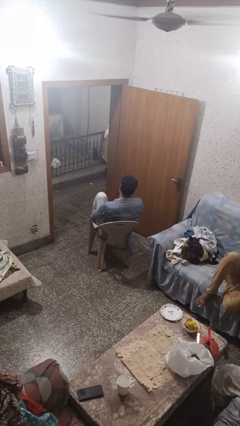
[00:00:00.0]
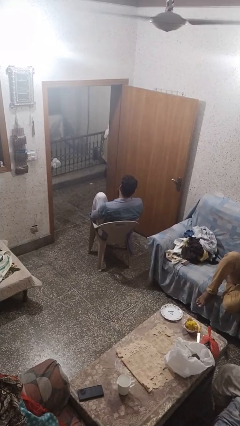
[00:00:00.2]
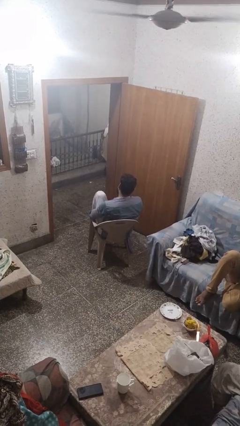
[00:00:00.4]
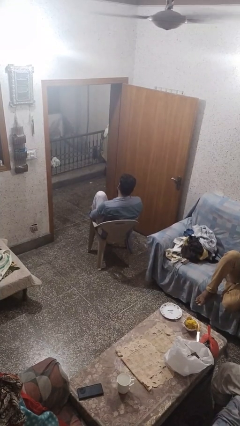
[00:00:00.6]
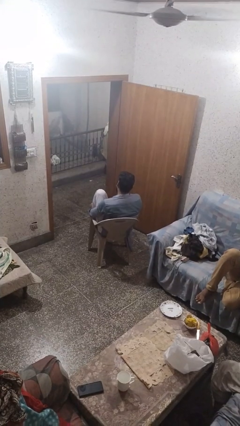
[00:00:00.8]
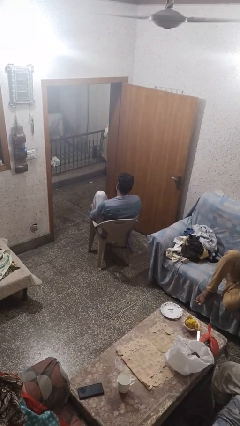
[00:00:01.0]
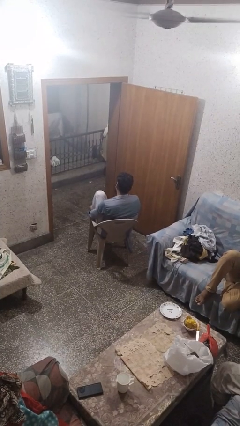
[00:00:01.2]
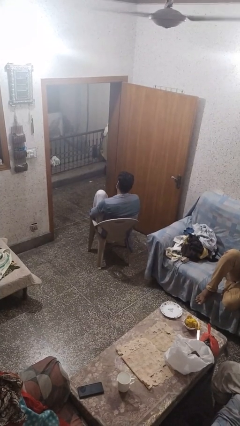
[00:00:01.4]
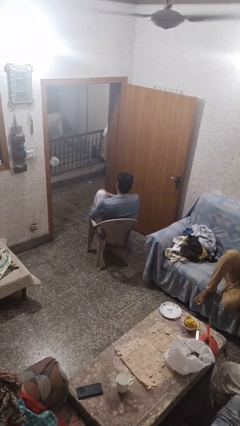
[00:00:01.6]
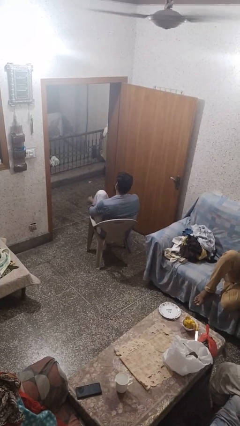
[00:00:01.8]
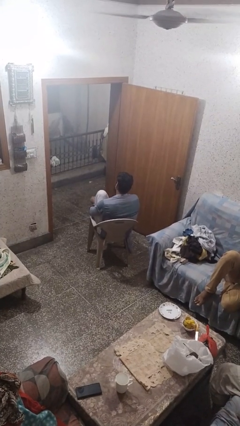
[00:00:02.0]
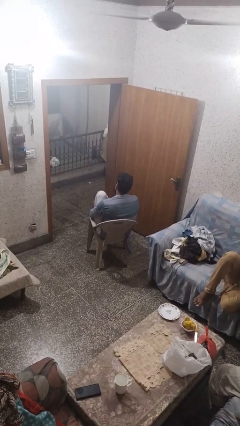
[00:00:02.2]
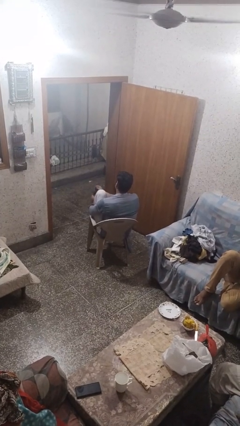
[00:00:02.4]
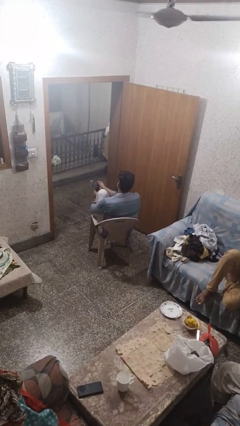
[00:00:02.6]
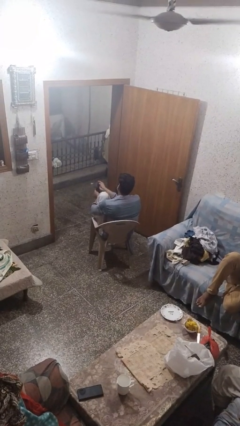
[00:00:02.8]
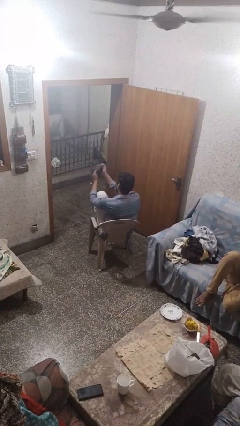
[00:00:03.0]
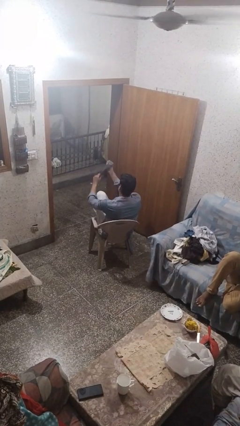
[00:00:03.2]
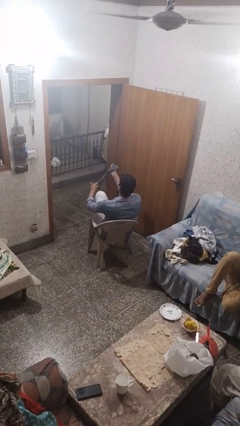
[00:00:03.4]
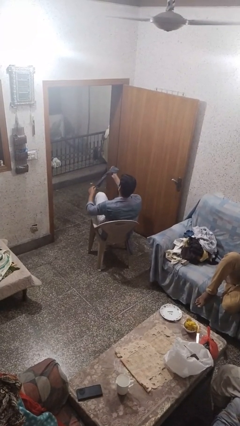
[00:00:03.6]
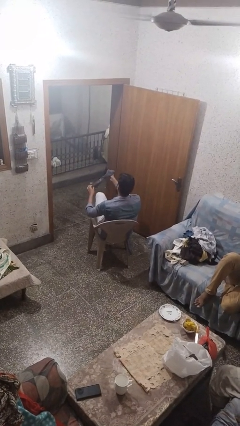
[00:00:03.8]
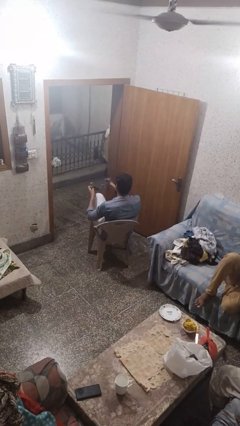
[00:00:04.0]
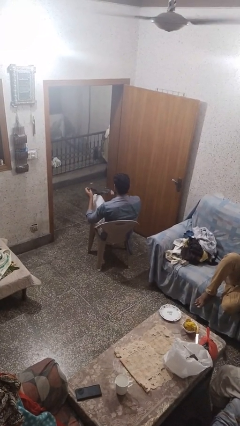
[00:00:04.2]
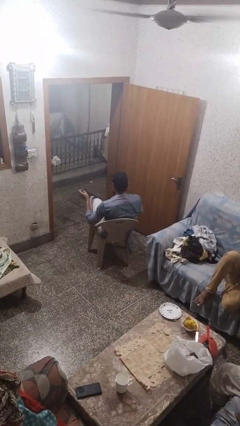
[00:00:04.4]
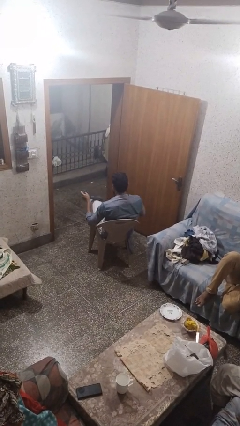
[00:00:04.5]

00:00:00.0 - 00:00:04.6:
person takes off socks

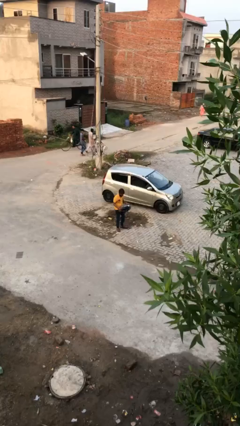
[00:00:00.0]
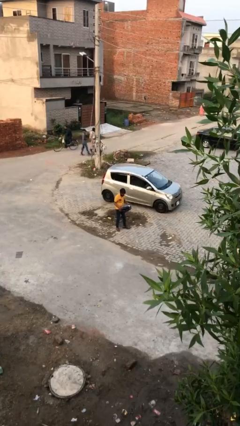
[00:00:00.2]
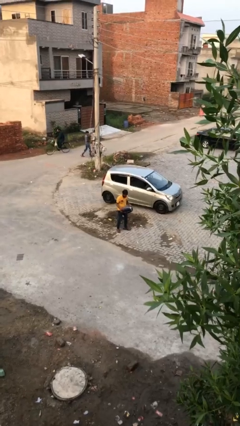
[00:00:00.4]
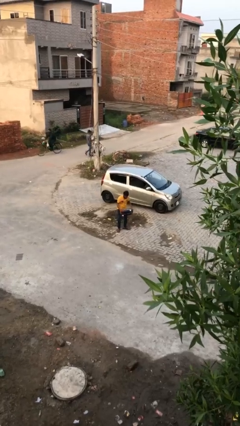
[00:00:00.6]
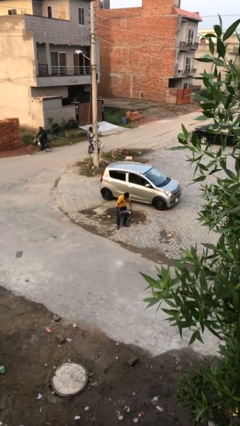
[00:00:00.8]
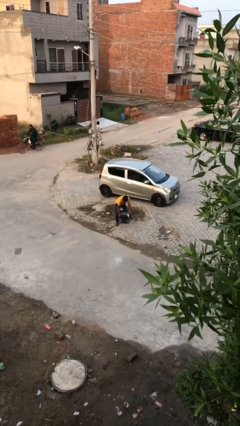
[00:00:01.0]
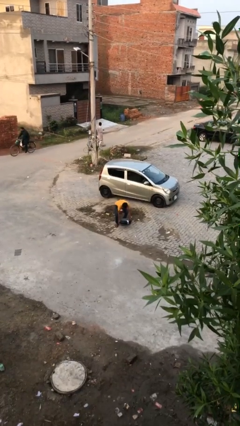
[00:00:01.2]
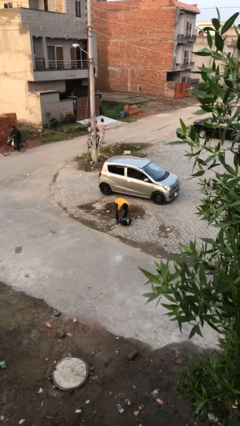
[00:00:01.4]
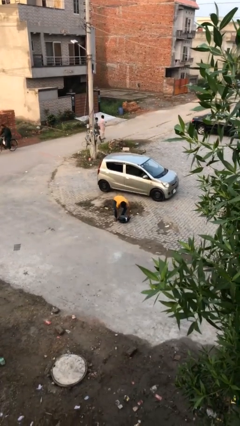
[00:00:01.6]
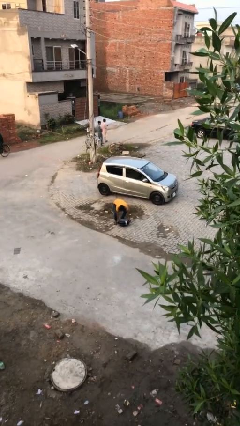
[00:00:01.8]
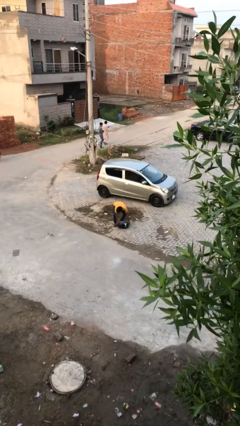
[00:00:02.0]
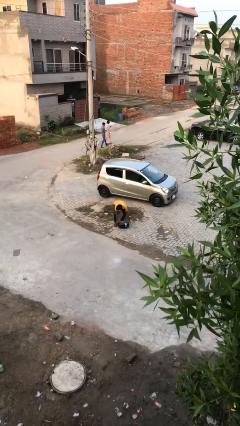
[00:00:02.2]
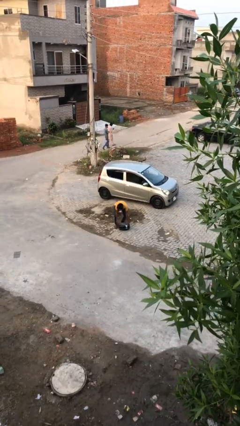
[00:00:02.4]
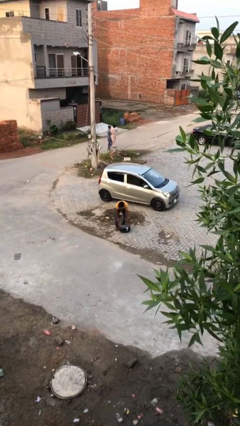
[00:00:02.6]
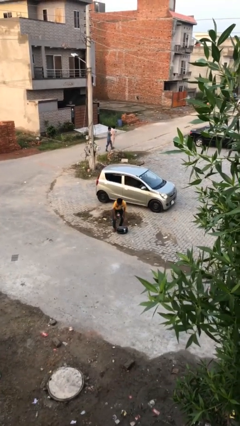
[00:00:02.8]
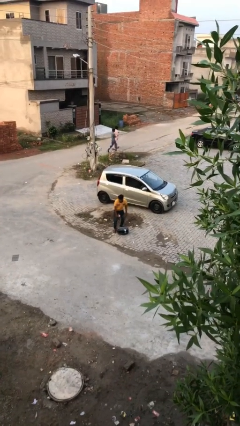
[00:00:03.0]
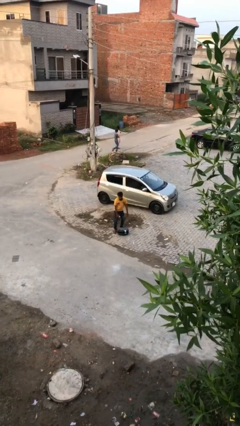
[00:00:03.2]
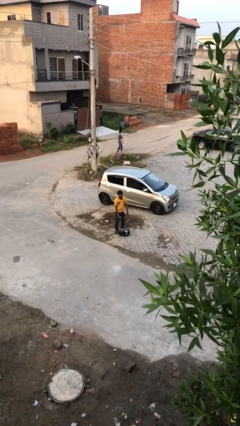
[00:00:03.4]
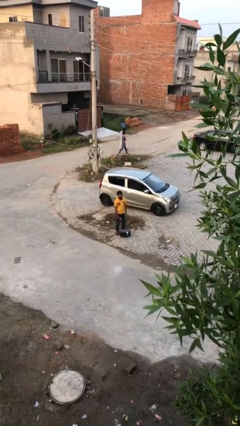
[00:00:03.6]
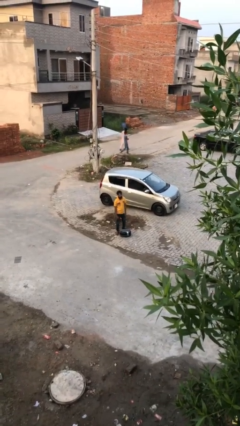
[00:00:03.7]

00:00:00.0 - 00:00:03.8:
person puts down object on floor

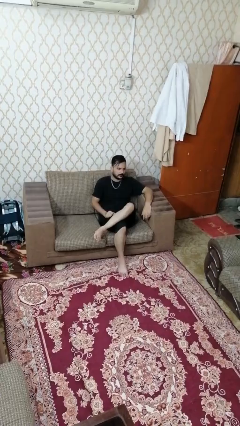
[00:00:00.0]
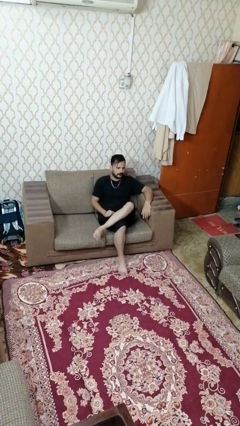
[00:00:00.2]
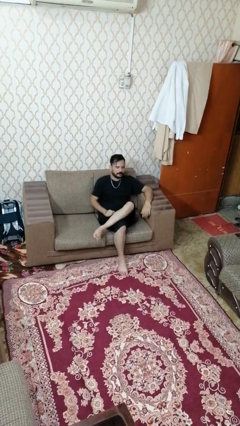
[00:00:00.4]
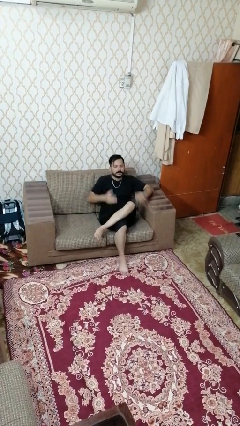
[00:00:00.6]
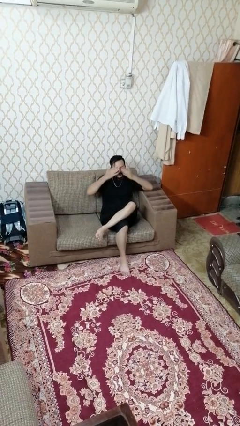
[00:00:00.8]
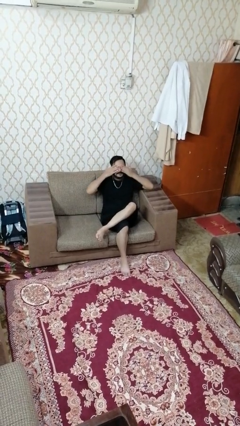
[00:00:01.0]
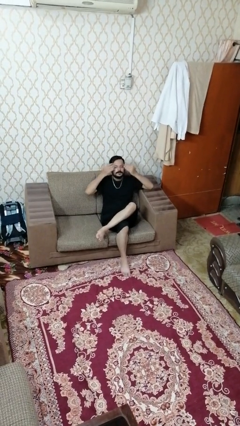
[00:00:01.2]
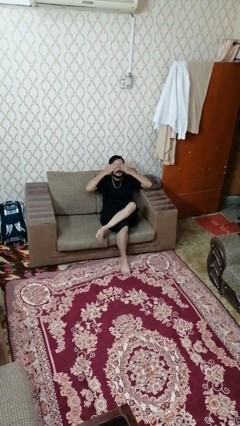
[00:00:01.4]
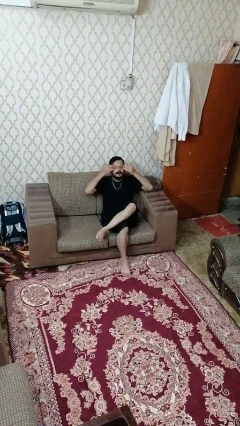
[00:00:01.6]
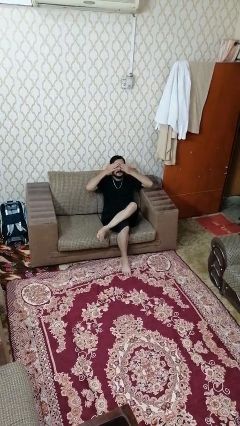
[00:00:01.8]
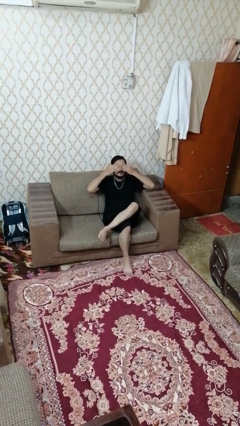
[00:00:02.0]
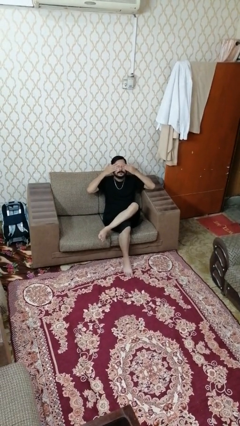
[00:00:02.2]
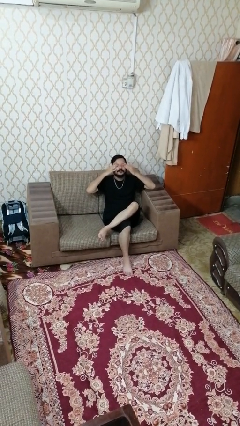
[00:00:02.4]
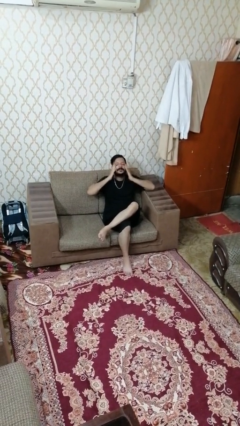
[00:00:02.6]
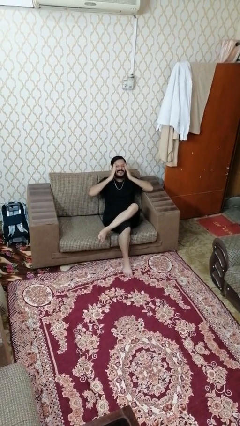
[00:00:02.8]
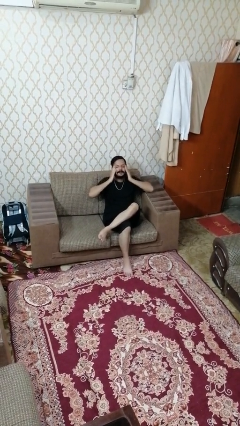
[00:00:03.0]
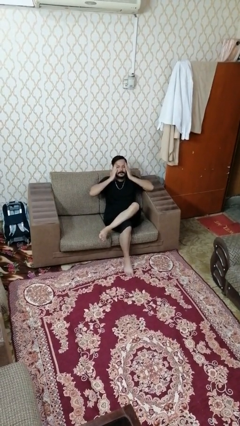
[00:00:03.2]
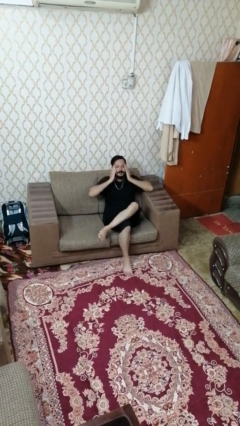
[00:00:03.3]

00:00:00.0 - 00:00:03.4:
person rubs eyes

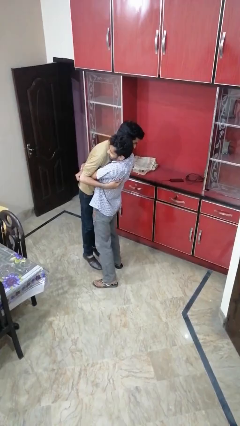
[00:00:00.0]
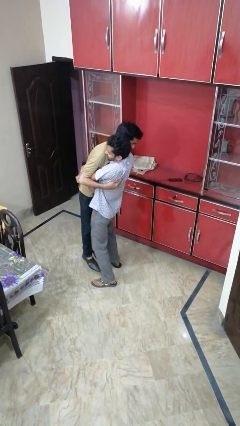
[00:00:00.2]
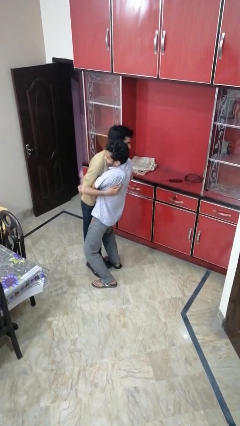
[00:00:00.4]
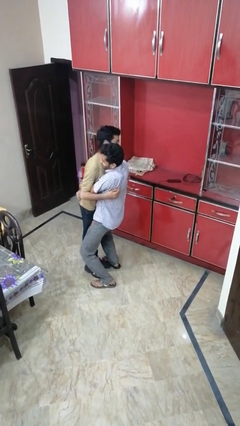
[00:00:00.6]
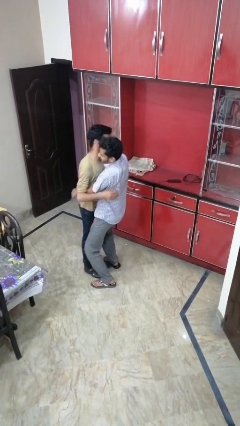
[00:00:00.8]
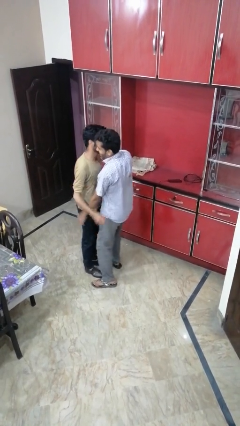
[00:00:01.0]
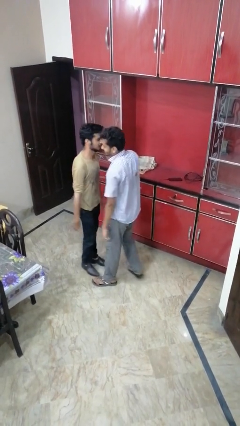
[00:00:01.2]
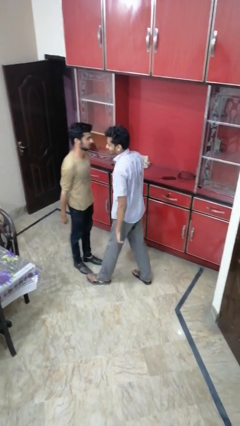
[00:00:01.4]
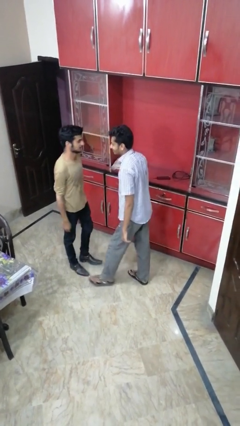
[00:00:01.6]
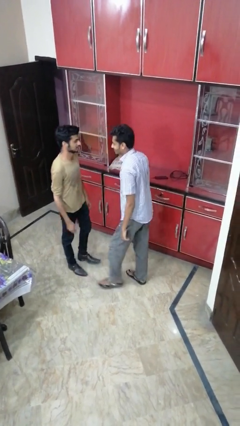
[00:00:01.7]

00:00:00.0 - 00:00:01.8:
person laughs with person

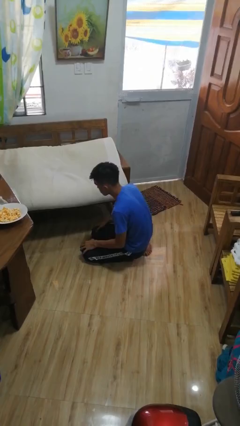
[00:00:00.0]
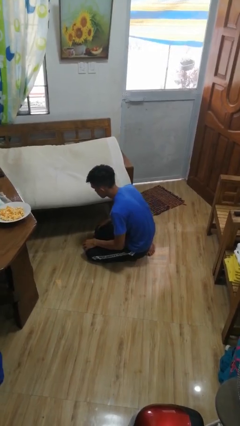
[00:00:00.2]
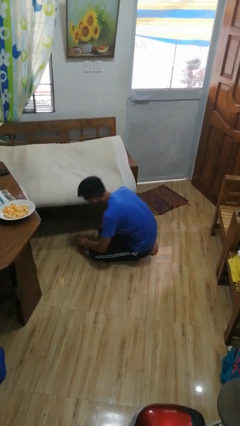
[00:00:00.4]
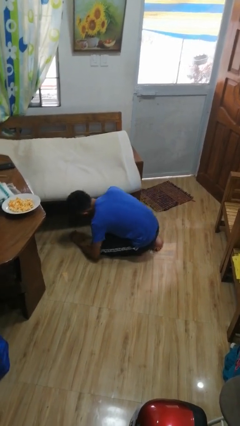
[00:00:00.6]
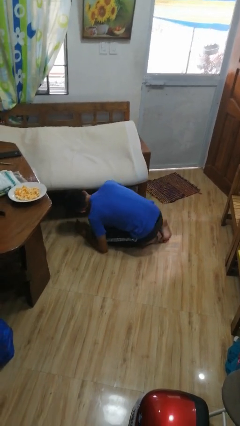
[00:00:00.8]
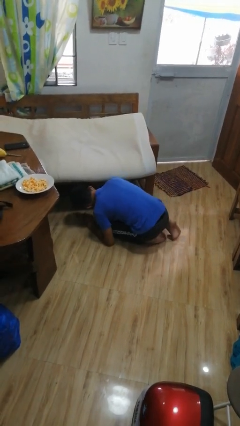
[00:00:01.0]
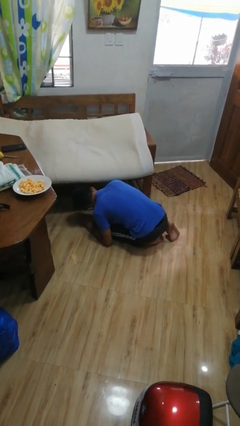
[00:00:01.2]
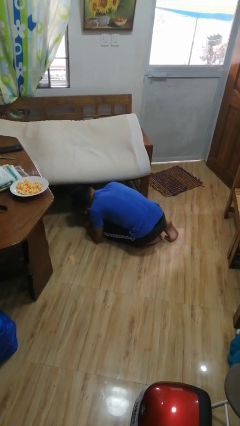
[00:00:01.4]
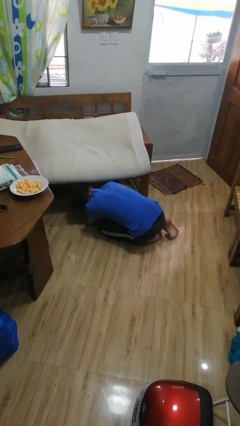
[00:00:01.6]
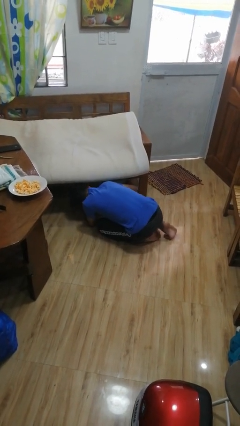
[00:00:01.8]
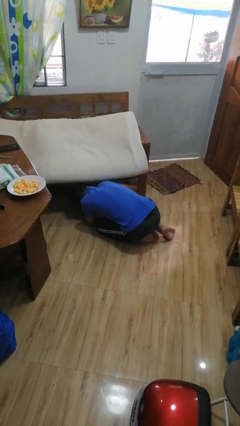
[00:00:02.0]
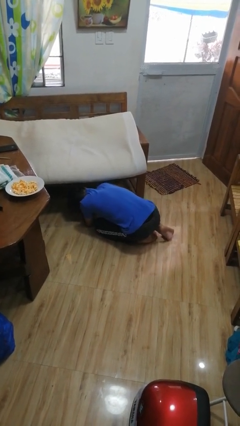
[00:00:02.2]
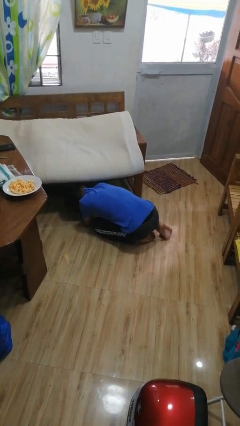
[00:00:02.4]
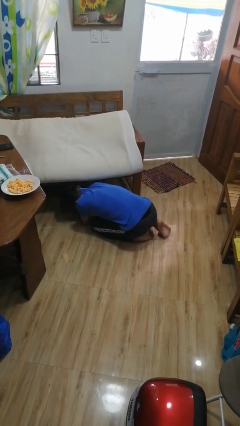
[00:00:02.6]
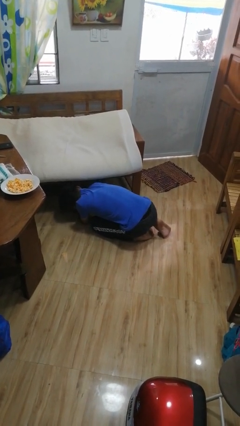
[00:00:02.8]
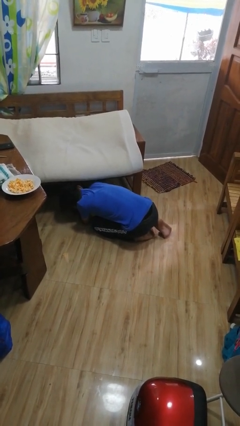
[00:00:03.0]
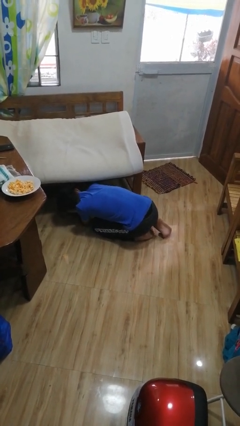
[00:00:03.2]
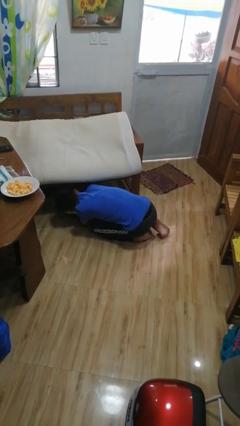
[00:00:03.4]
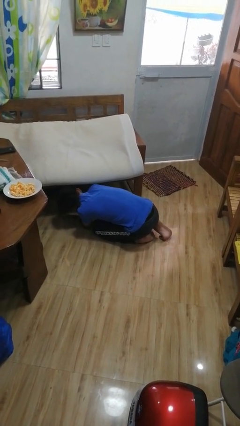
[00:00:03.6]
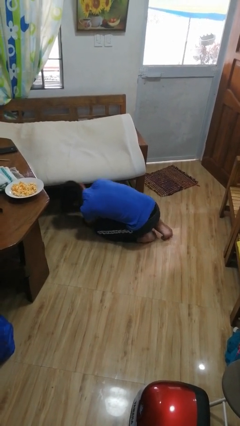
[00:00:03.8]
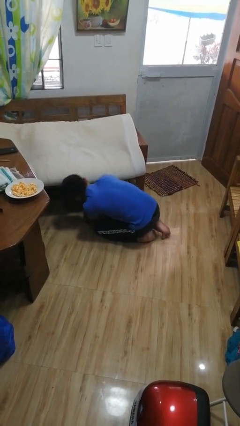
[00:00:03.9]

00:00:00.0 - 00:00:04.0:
person searches under couch
